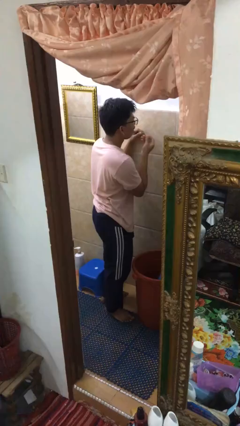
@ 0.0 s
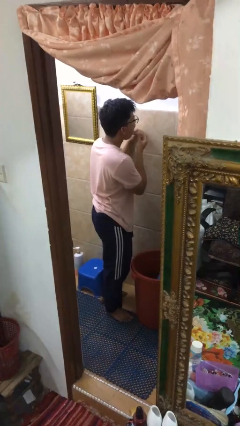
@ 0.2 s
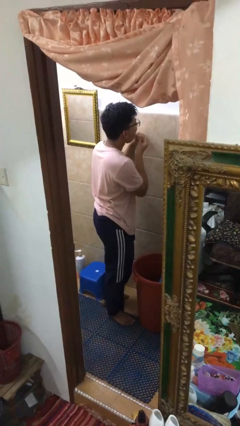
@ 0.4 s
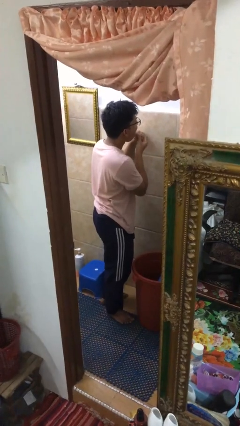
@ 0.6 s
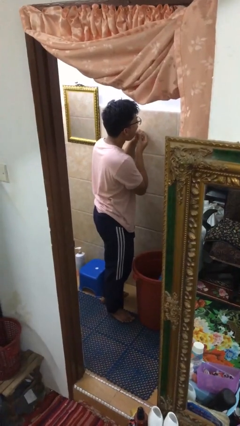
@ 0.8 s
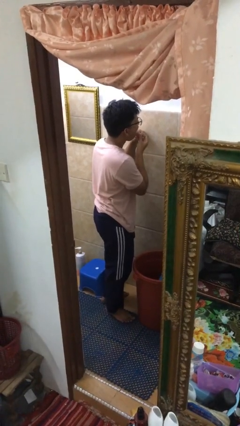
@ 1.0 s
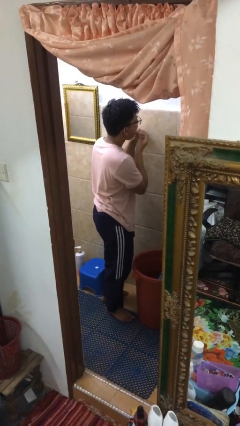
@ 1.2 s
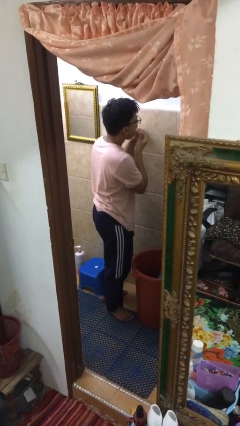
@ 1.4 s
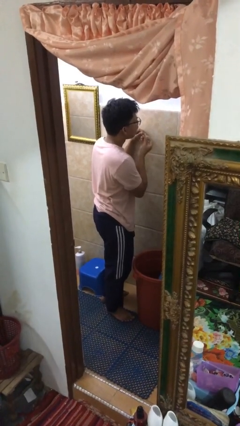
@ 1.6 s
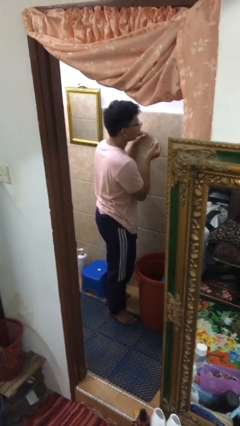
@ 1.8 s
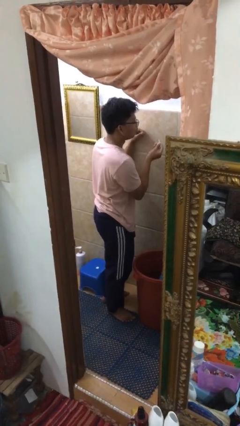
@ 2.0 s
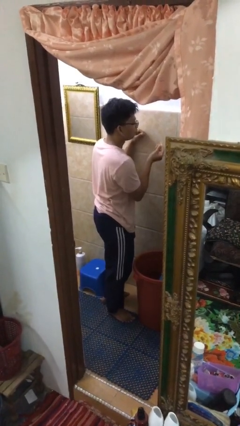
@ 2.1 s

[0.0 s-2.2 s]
person flosses

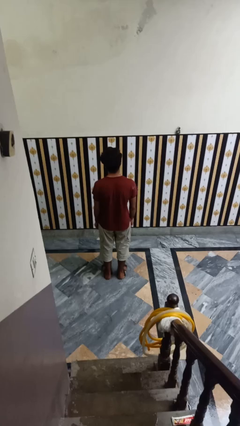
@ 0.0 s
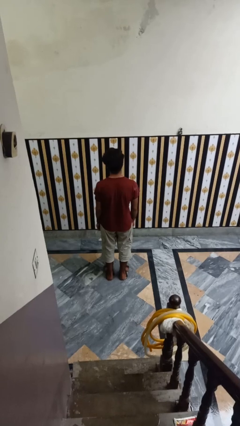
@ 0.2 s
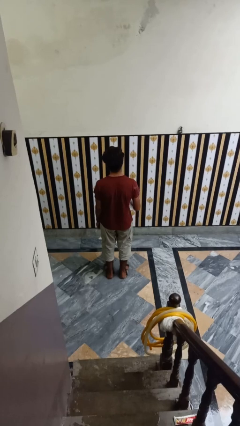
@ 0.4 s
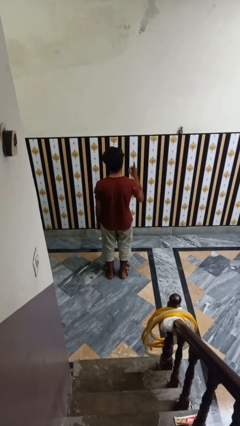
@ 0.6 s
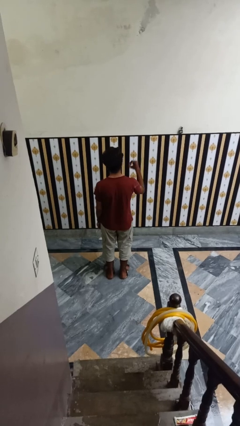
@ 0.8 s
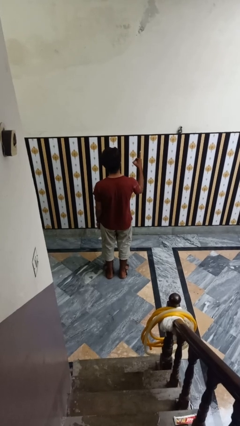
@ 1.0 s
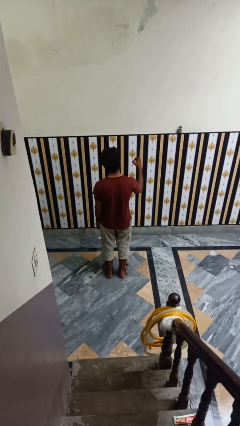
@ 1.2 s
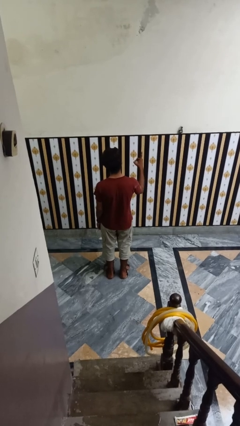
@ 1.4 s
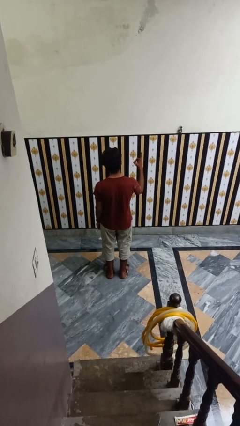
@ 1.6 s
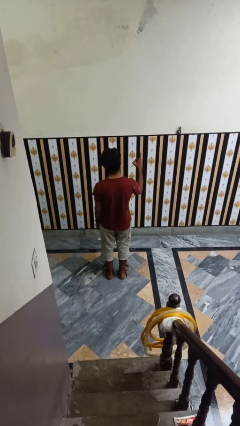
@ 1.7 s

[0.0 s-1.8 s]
person gestures number one

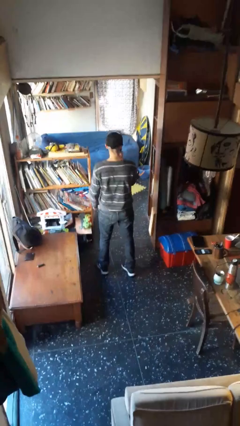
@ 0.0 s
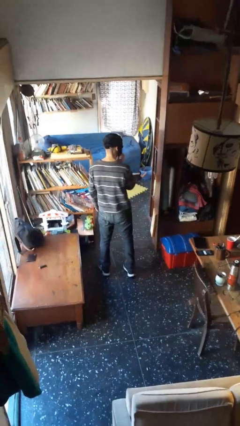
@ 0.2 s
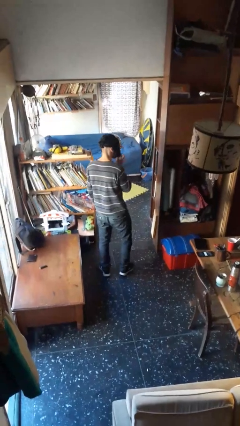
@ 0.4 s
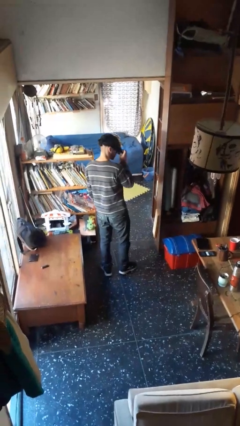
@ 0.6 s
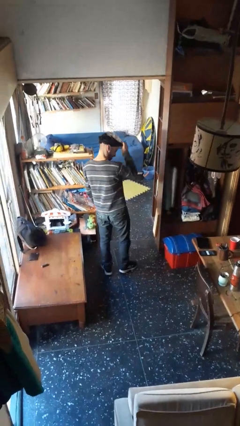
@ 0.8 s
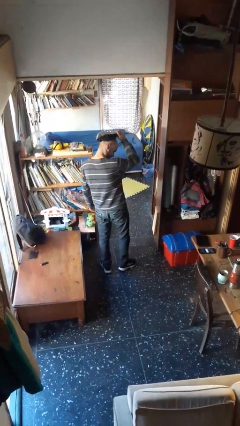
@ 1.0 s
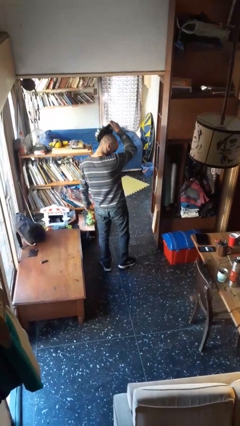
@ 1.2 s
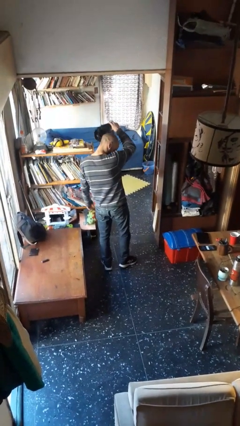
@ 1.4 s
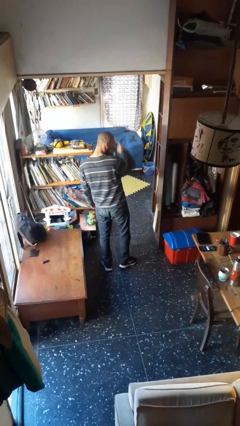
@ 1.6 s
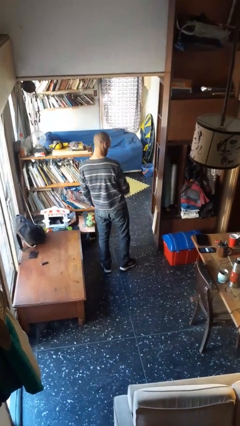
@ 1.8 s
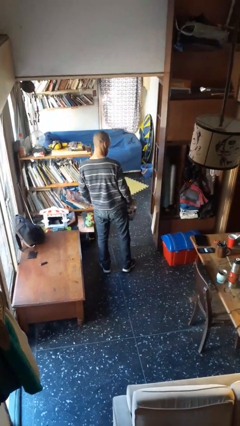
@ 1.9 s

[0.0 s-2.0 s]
person takes off facemask

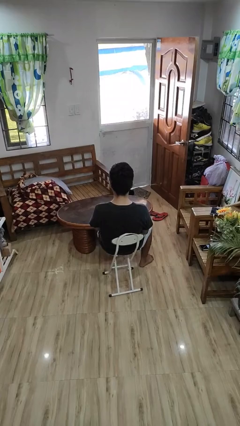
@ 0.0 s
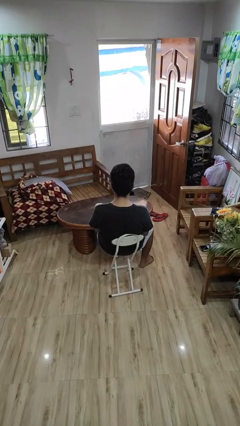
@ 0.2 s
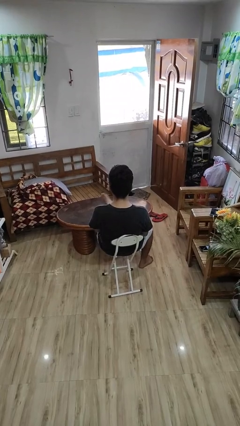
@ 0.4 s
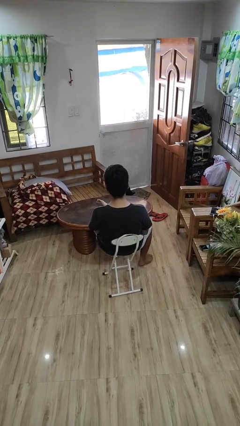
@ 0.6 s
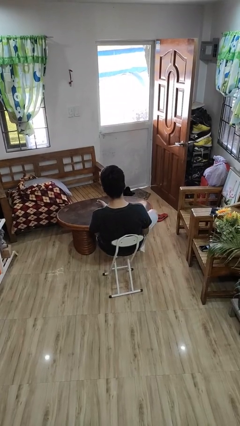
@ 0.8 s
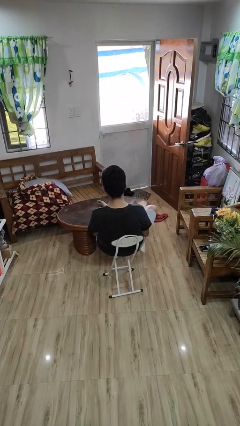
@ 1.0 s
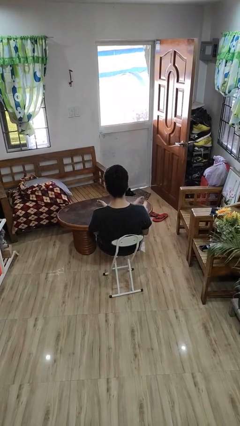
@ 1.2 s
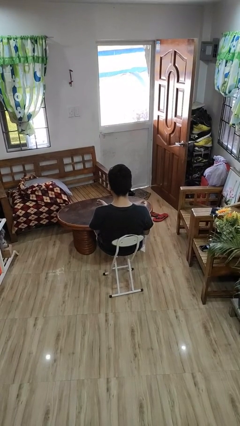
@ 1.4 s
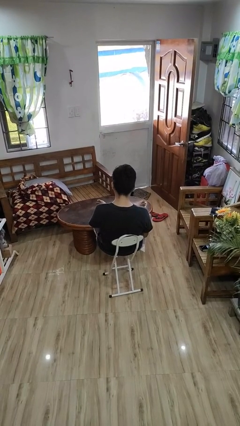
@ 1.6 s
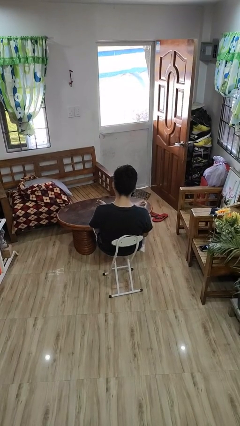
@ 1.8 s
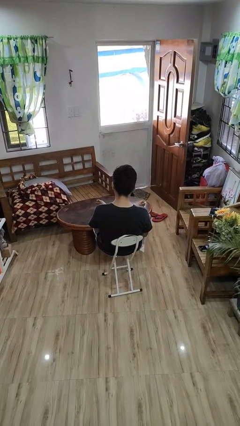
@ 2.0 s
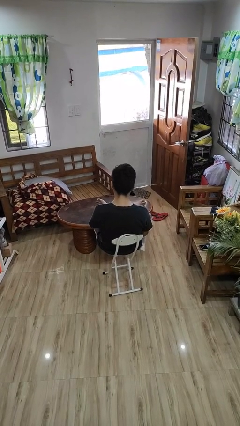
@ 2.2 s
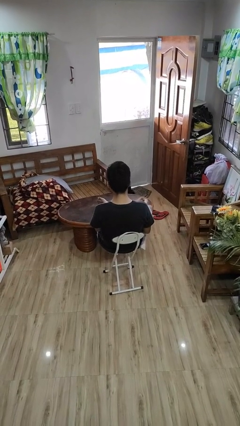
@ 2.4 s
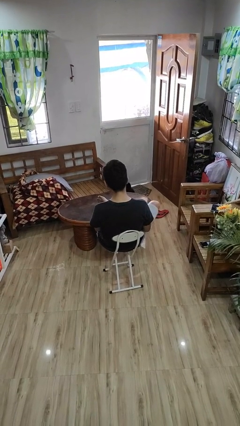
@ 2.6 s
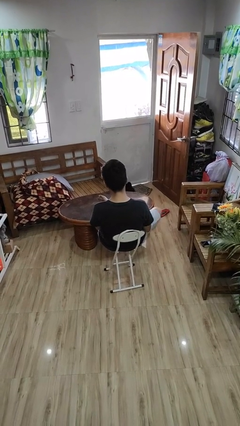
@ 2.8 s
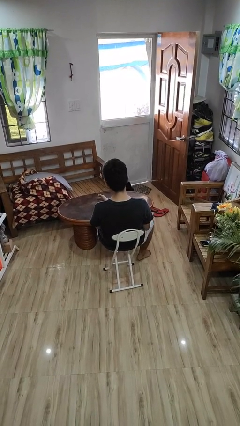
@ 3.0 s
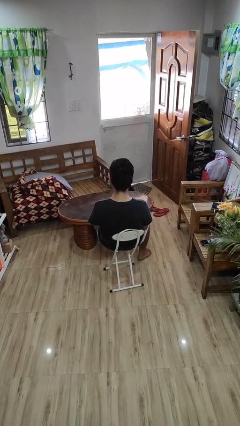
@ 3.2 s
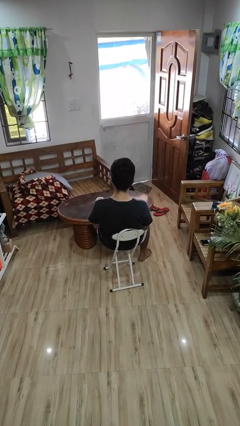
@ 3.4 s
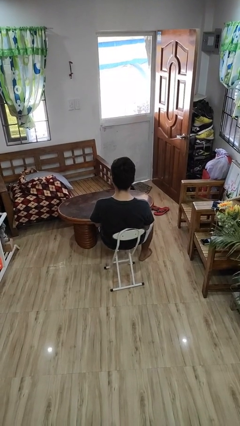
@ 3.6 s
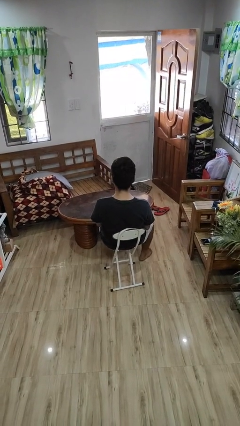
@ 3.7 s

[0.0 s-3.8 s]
person puts feet up

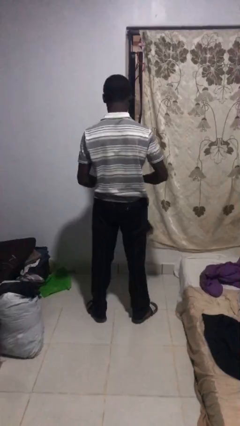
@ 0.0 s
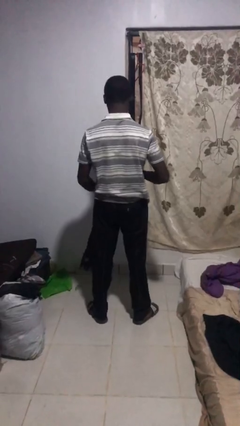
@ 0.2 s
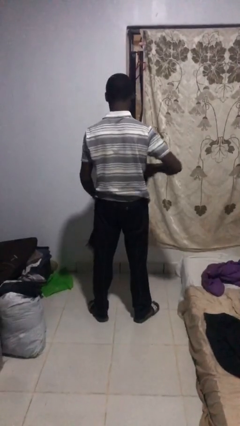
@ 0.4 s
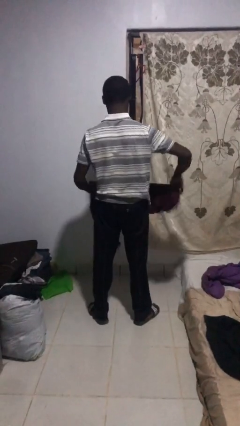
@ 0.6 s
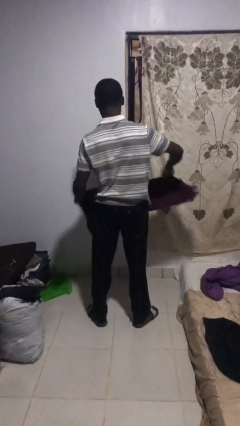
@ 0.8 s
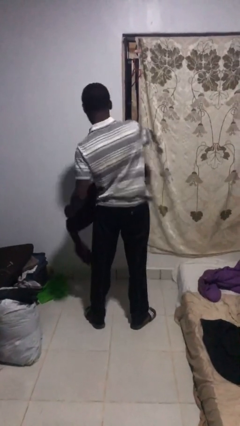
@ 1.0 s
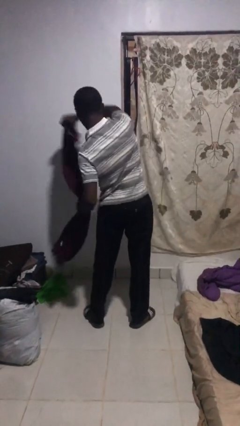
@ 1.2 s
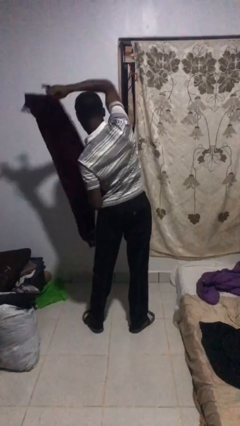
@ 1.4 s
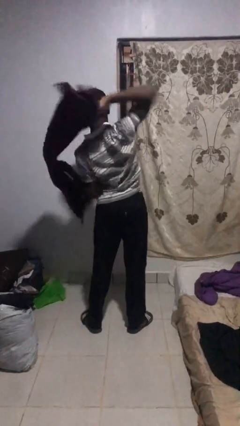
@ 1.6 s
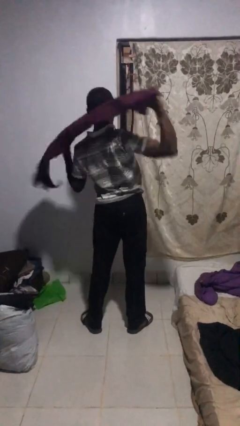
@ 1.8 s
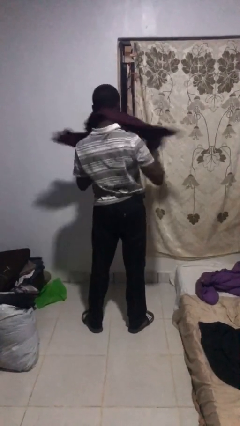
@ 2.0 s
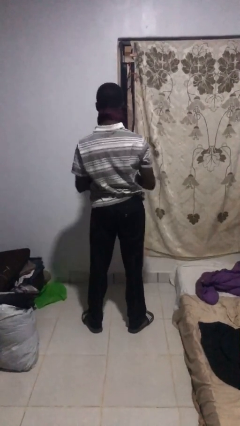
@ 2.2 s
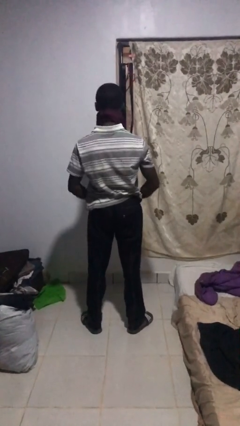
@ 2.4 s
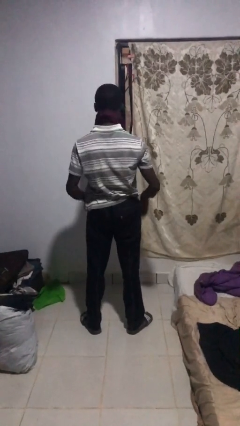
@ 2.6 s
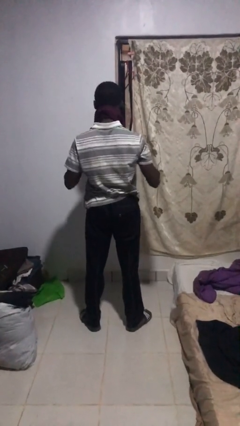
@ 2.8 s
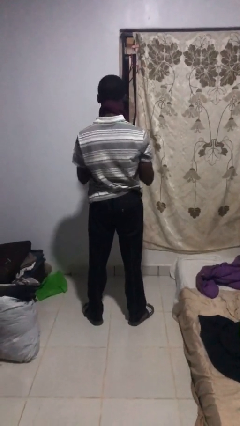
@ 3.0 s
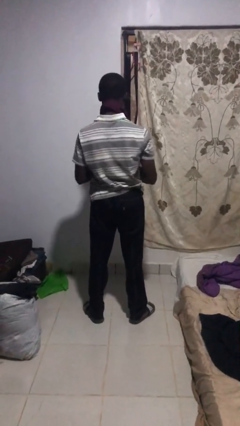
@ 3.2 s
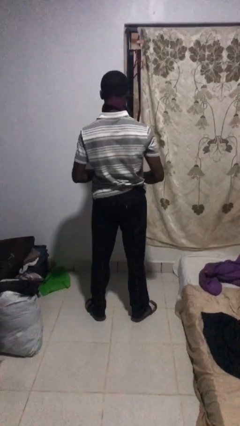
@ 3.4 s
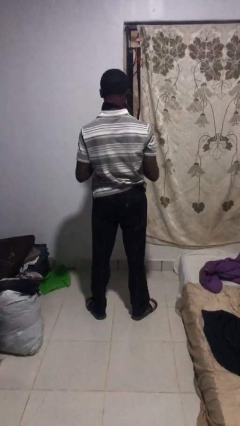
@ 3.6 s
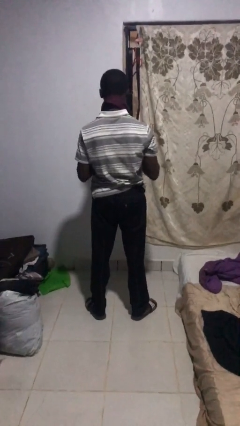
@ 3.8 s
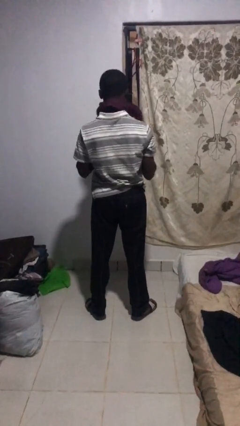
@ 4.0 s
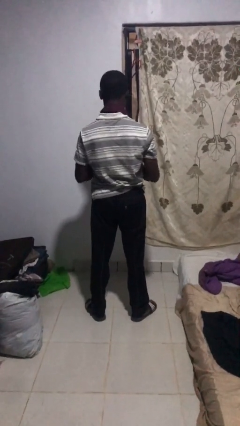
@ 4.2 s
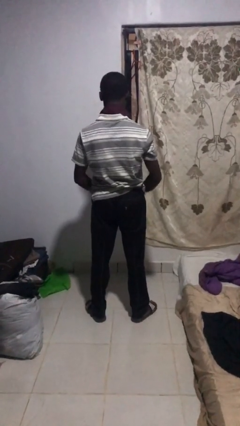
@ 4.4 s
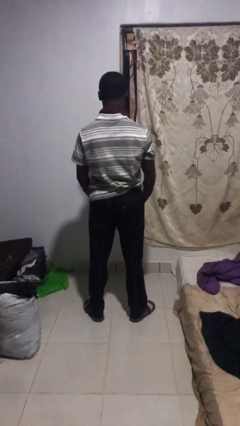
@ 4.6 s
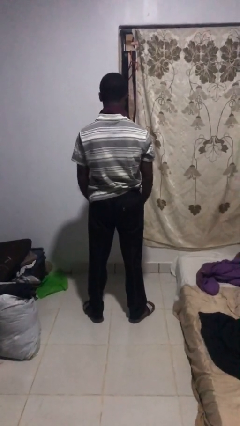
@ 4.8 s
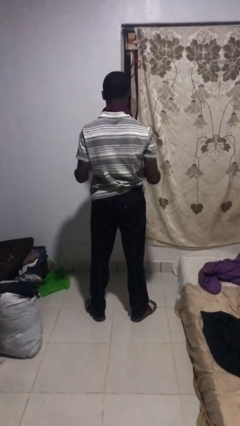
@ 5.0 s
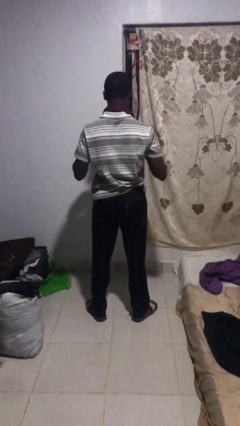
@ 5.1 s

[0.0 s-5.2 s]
person puts on scarf

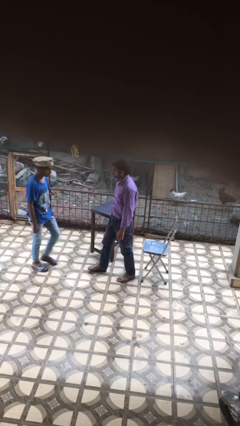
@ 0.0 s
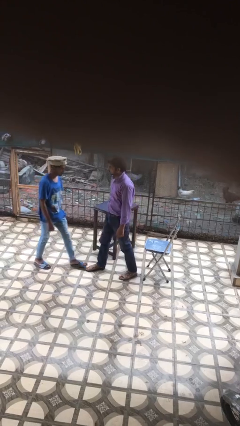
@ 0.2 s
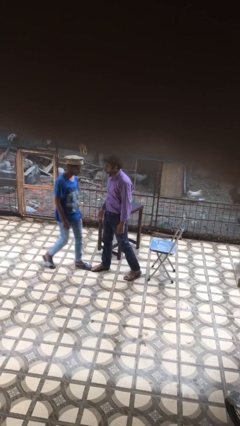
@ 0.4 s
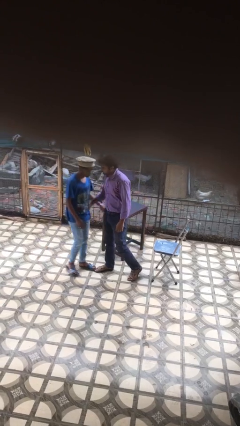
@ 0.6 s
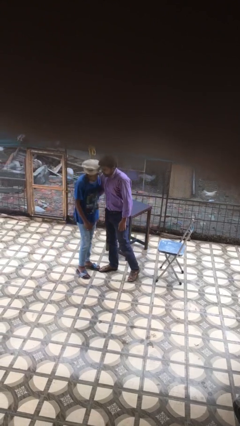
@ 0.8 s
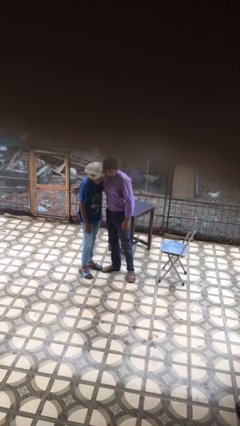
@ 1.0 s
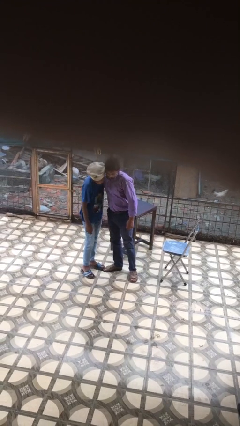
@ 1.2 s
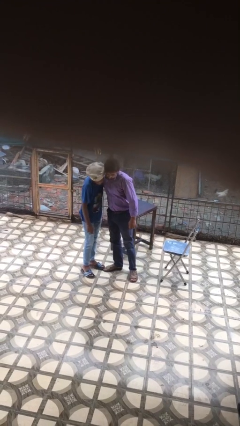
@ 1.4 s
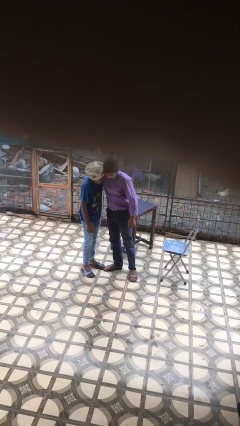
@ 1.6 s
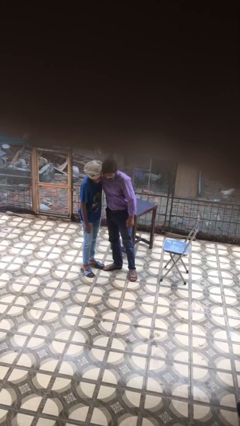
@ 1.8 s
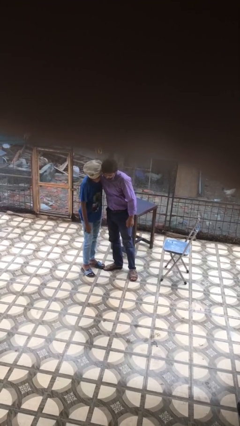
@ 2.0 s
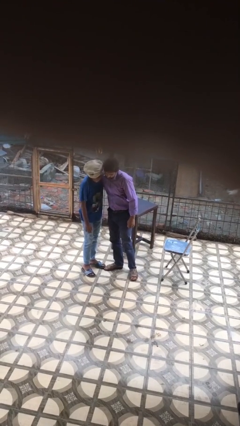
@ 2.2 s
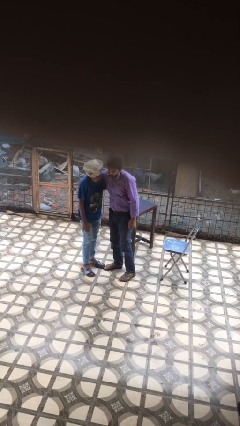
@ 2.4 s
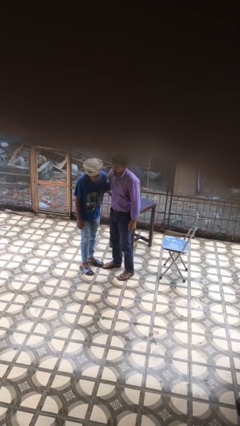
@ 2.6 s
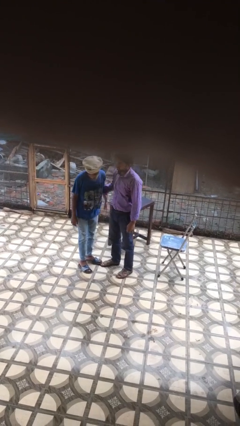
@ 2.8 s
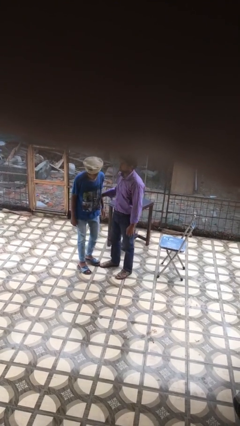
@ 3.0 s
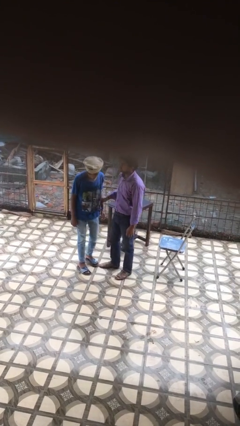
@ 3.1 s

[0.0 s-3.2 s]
person embraces person
